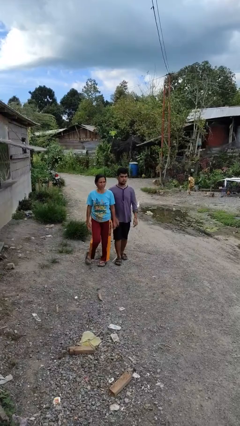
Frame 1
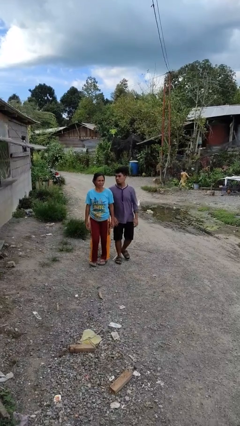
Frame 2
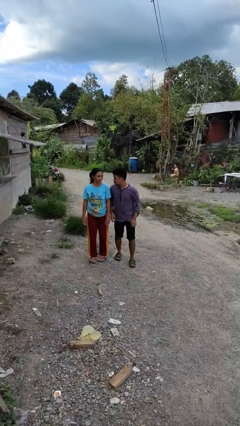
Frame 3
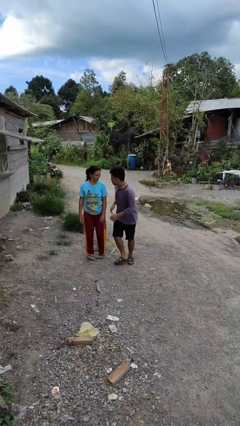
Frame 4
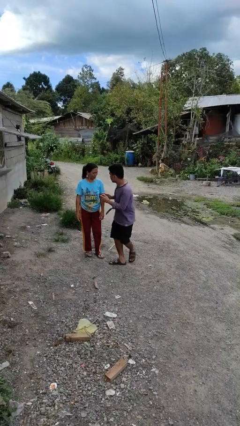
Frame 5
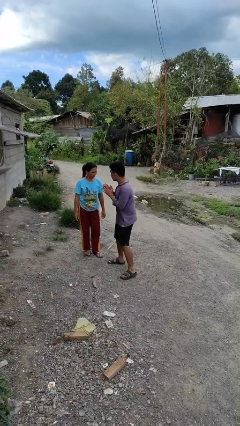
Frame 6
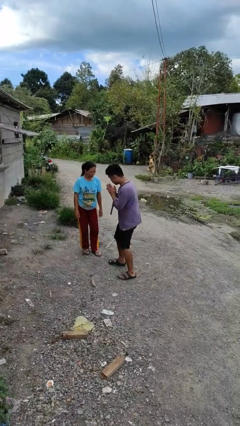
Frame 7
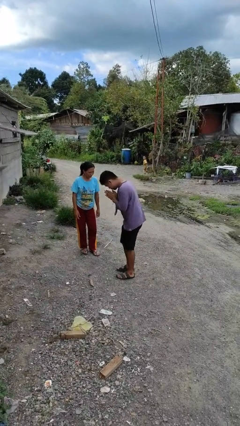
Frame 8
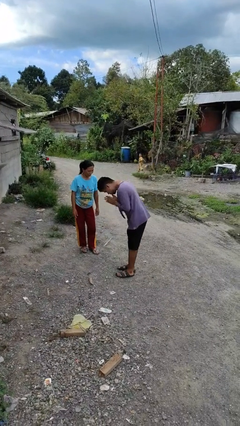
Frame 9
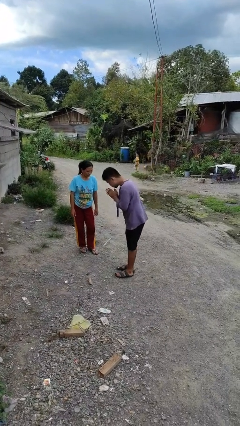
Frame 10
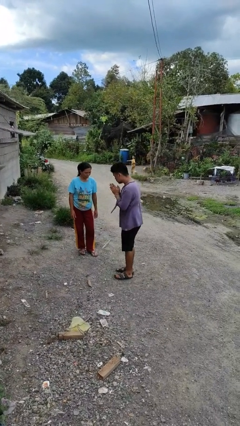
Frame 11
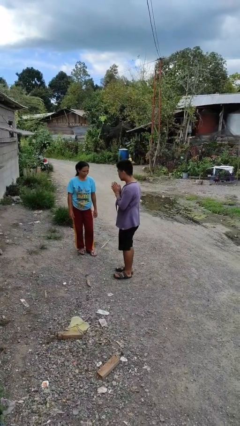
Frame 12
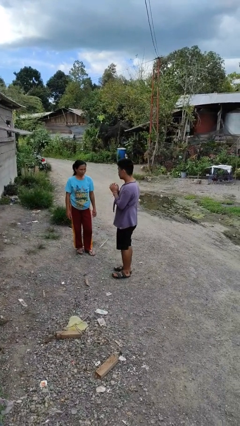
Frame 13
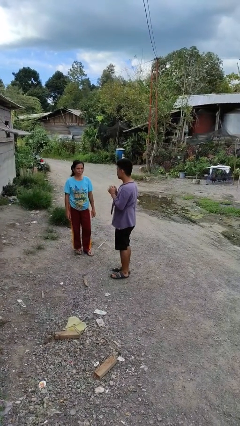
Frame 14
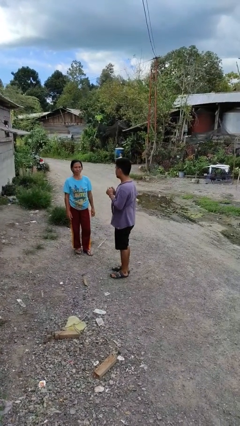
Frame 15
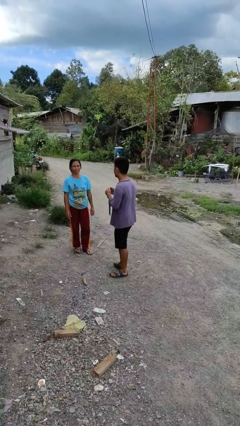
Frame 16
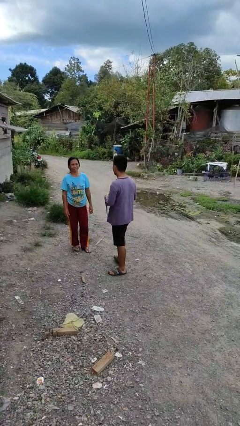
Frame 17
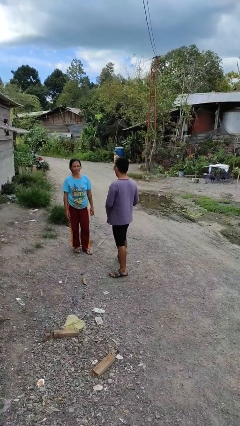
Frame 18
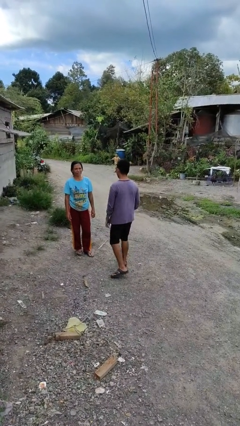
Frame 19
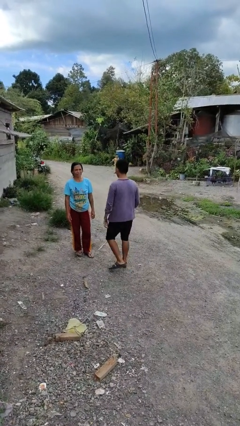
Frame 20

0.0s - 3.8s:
person bumps into person

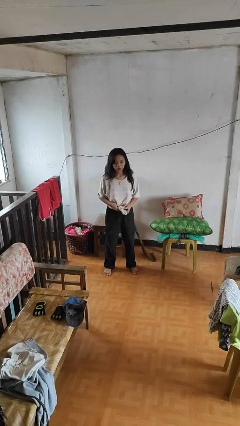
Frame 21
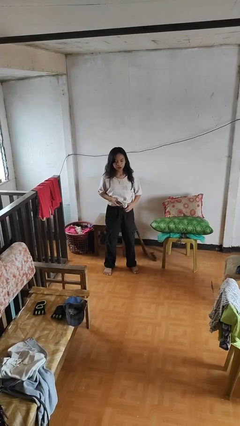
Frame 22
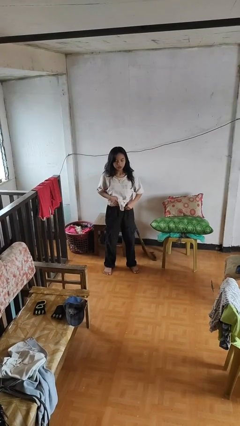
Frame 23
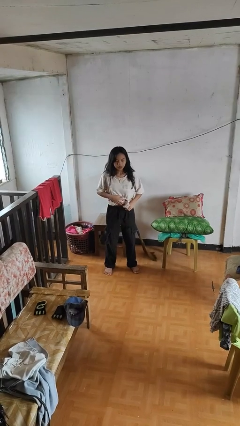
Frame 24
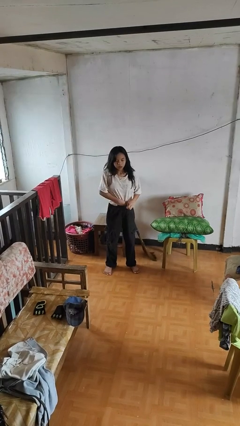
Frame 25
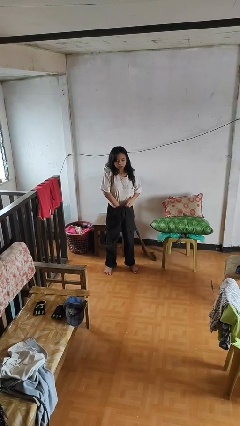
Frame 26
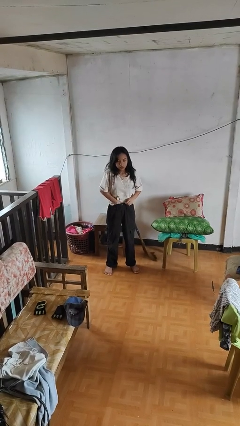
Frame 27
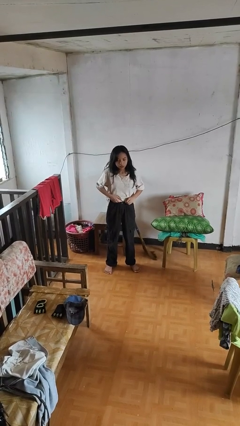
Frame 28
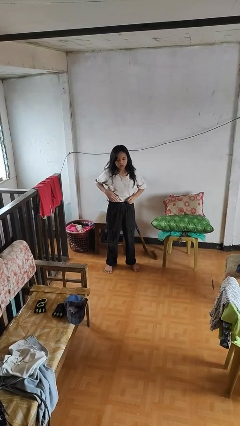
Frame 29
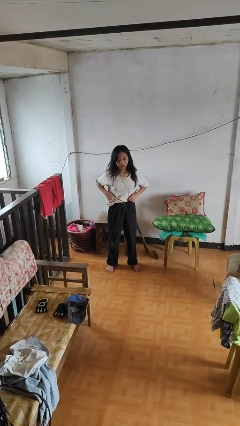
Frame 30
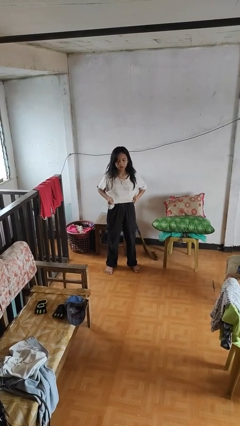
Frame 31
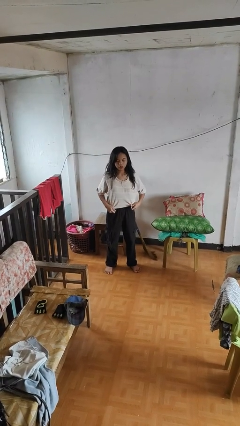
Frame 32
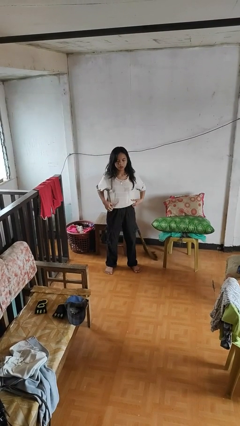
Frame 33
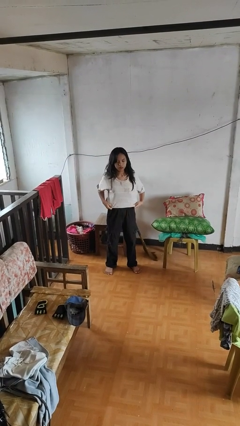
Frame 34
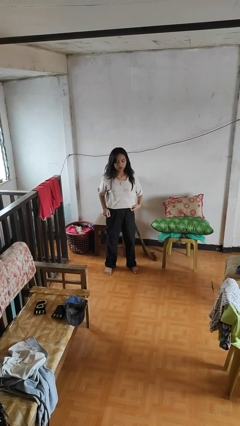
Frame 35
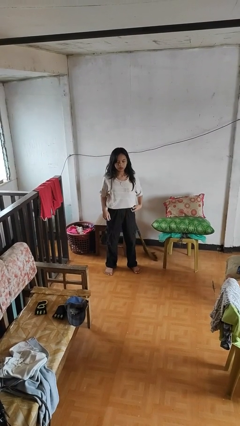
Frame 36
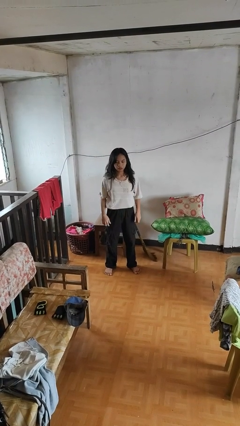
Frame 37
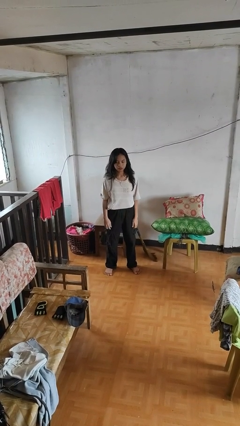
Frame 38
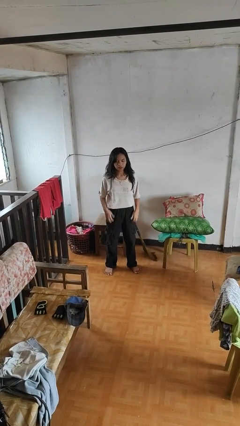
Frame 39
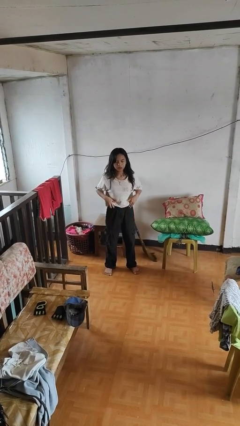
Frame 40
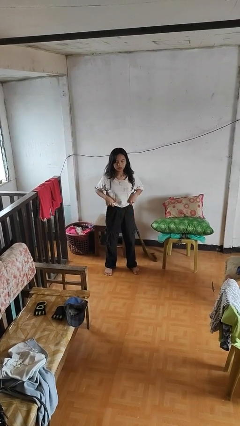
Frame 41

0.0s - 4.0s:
person tucks in shirt

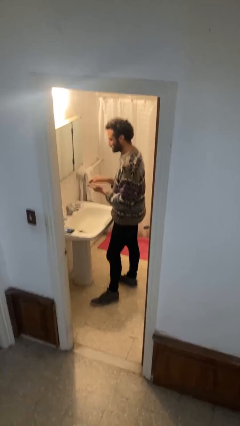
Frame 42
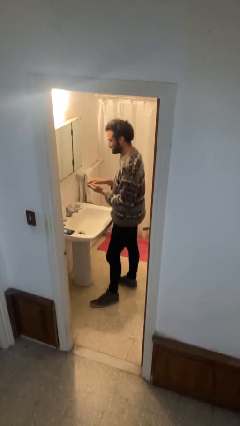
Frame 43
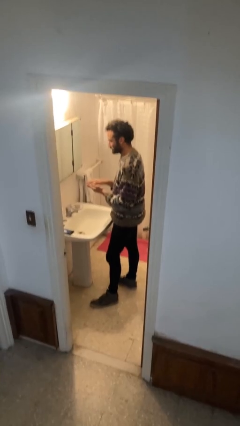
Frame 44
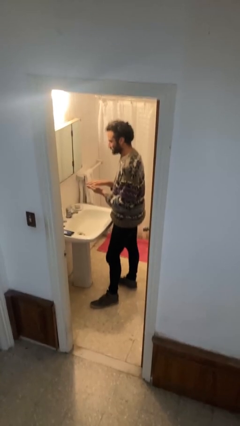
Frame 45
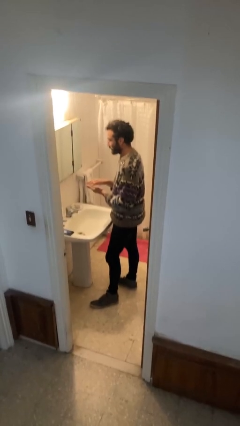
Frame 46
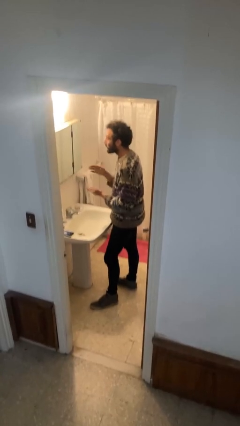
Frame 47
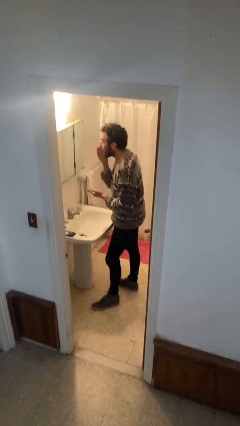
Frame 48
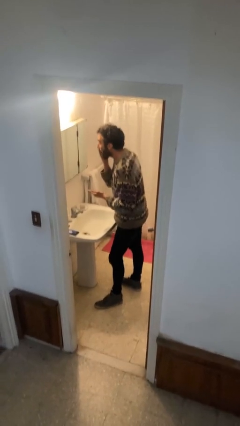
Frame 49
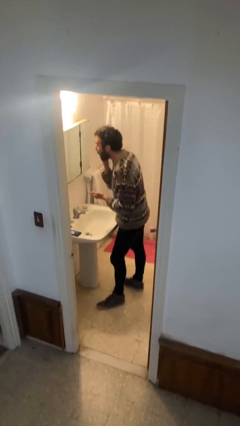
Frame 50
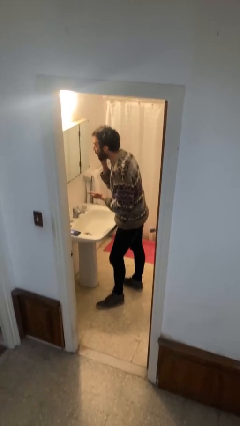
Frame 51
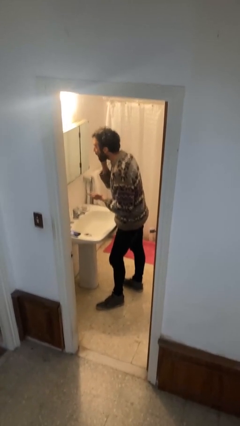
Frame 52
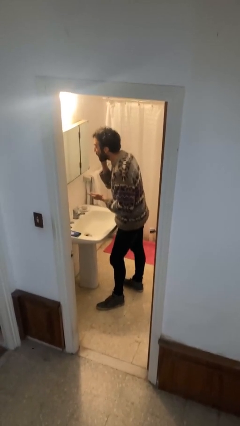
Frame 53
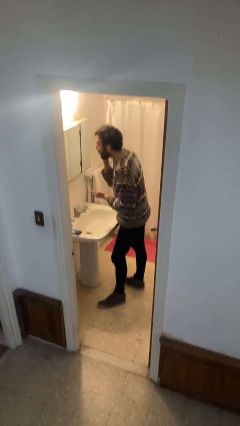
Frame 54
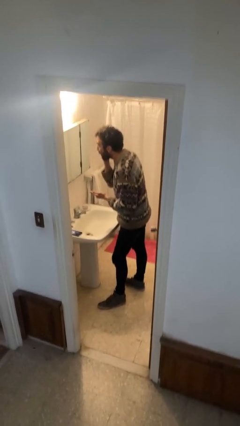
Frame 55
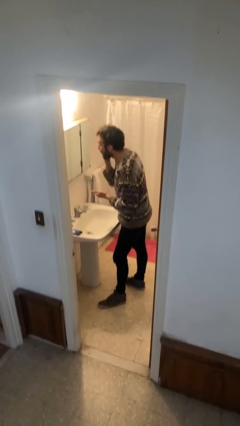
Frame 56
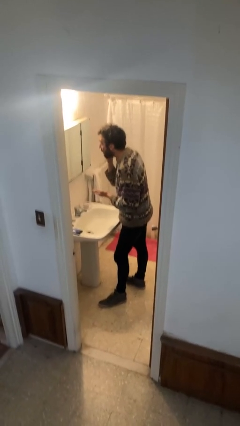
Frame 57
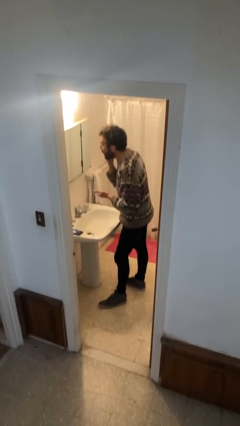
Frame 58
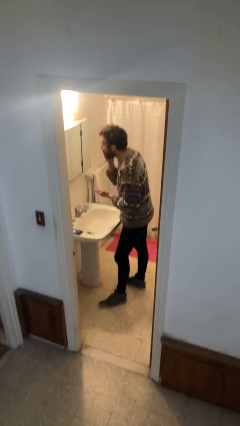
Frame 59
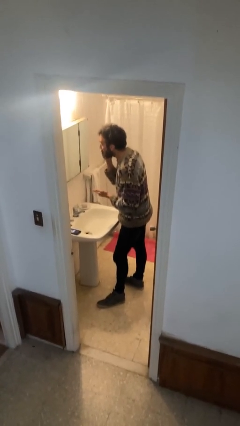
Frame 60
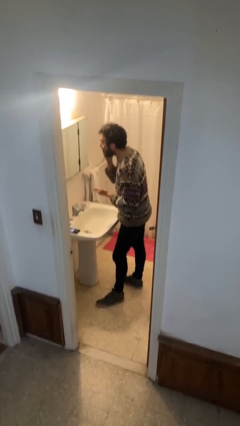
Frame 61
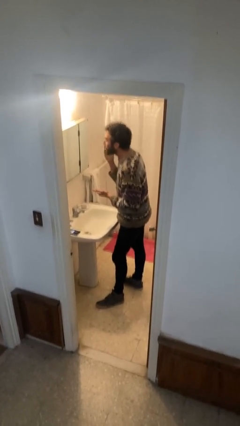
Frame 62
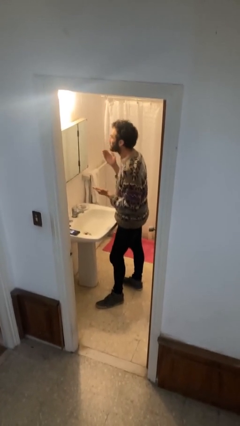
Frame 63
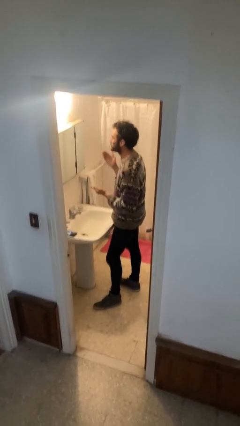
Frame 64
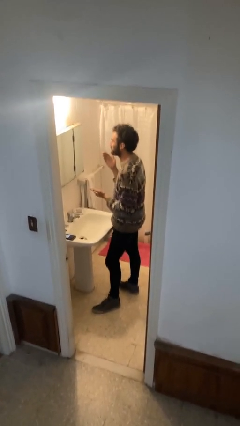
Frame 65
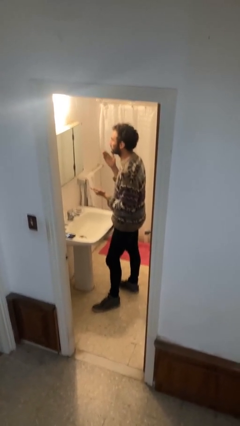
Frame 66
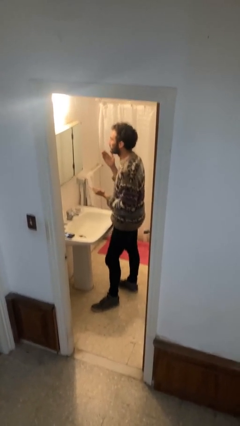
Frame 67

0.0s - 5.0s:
person applies foundation makeup

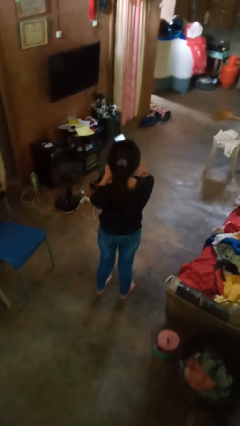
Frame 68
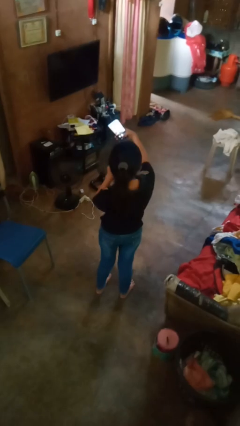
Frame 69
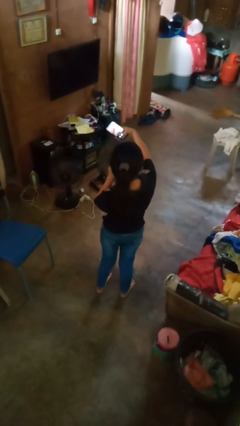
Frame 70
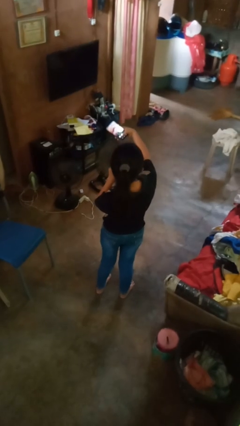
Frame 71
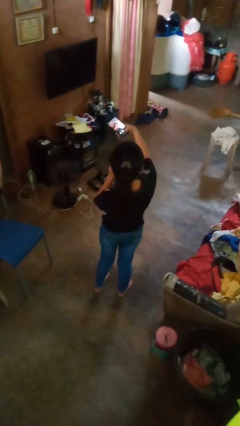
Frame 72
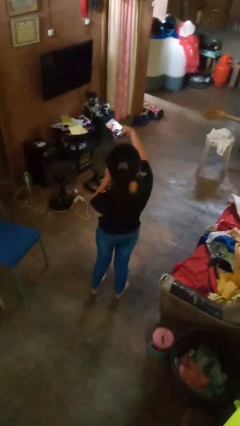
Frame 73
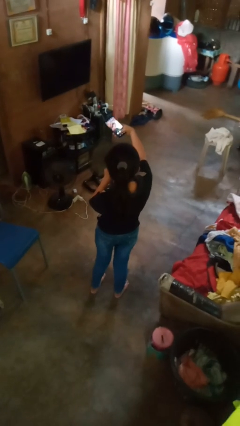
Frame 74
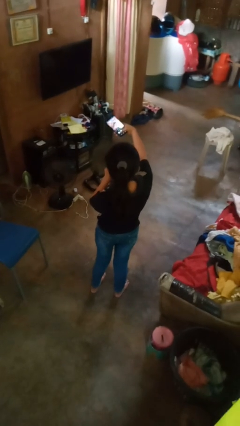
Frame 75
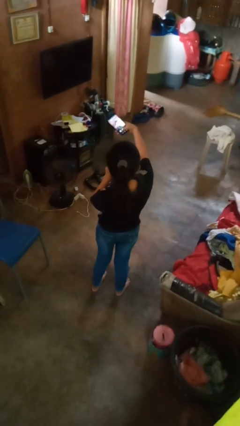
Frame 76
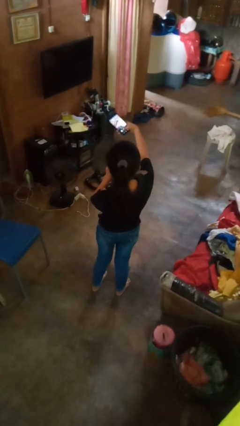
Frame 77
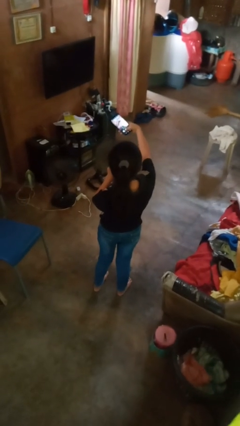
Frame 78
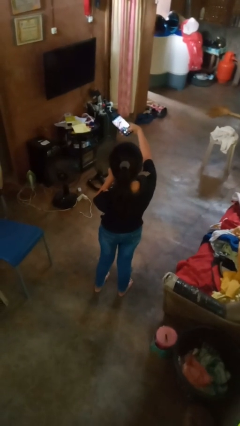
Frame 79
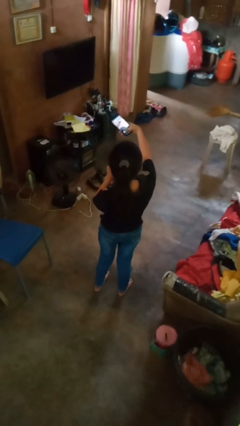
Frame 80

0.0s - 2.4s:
person takes selfie

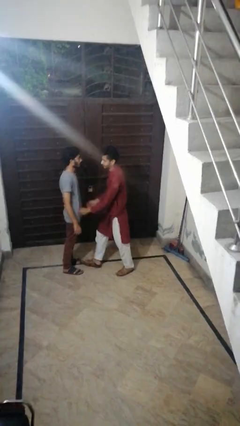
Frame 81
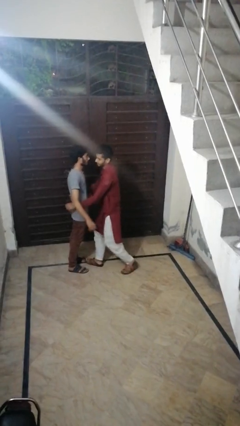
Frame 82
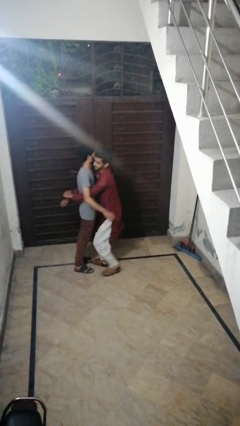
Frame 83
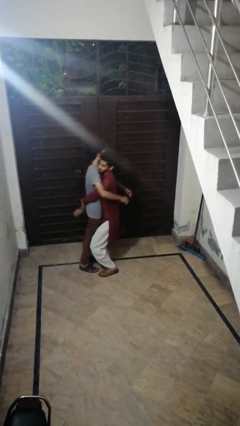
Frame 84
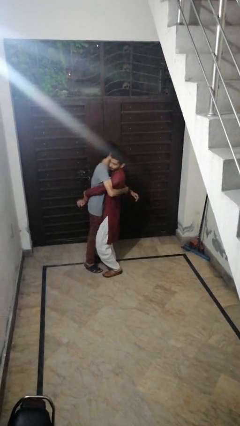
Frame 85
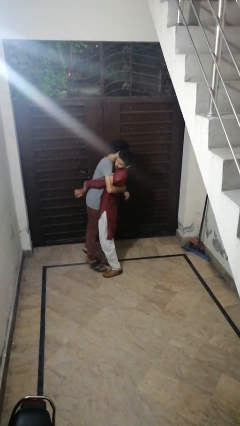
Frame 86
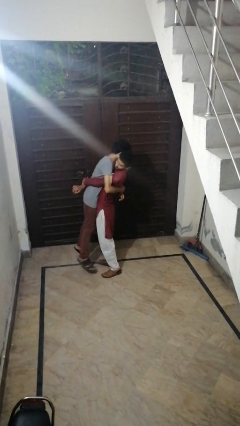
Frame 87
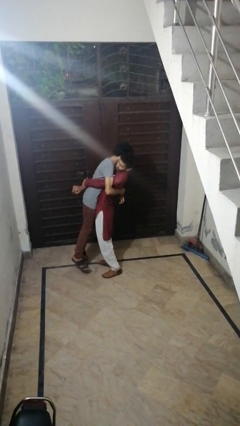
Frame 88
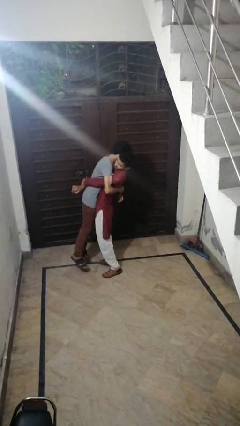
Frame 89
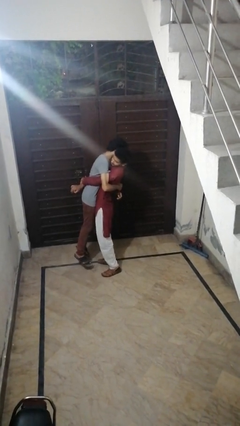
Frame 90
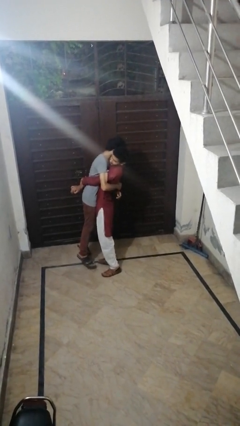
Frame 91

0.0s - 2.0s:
person picks up person

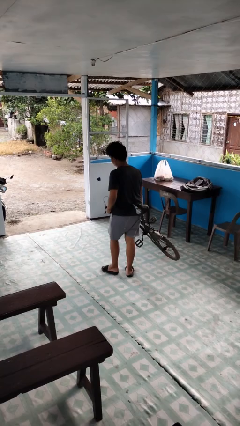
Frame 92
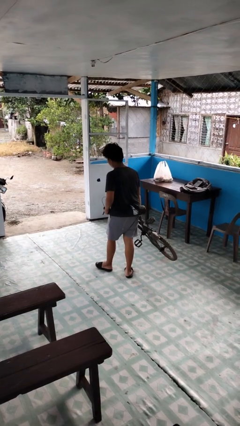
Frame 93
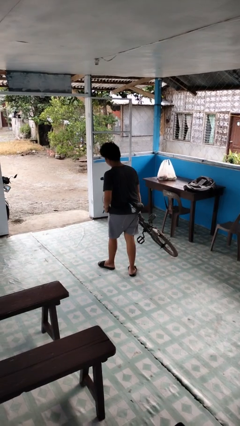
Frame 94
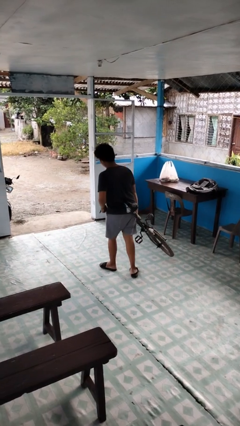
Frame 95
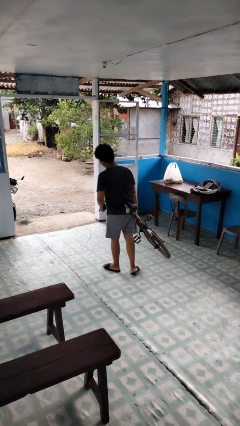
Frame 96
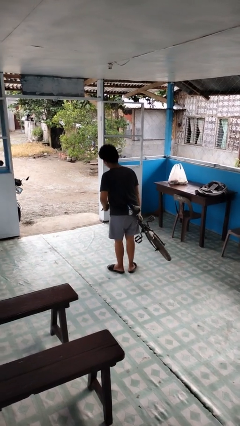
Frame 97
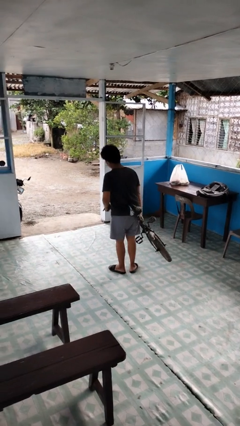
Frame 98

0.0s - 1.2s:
person carries bicycle
